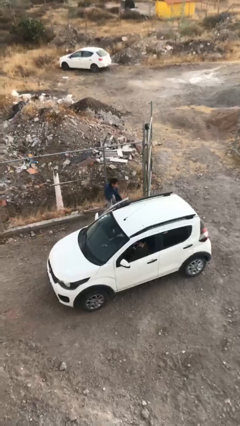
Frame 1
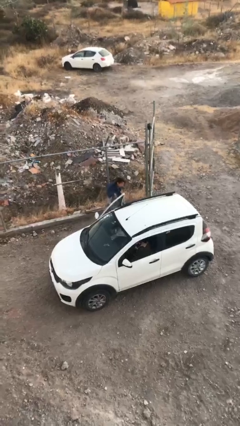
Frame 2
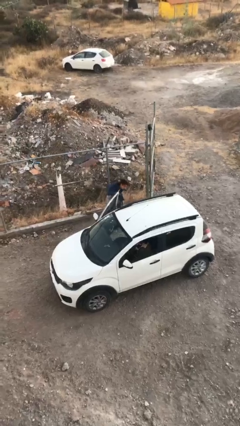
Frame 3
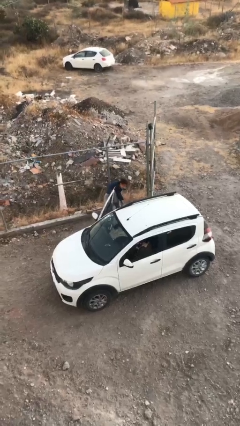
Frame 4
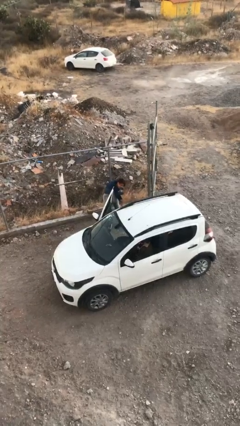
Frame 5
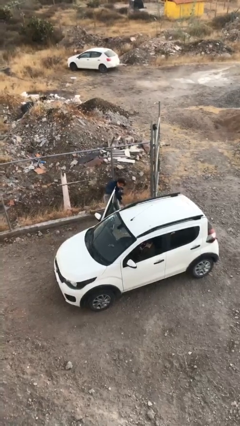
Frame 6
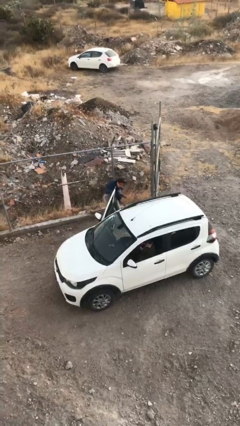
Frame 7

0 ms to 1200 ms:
person opens car door

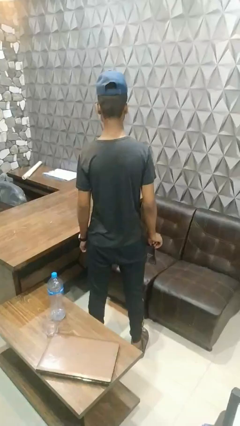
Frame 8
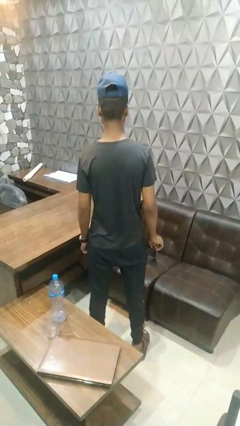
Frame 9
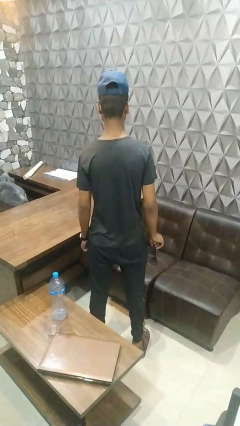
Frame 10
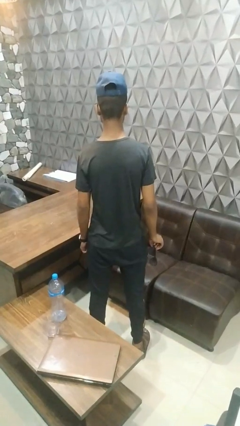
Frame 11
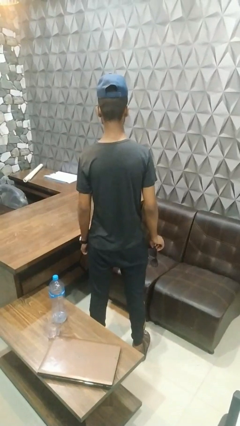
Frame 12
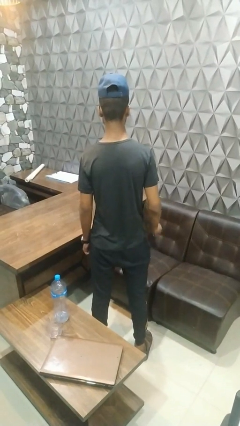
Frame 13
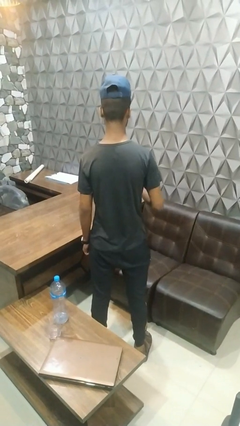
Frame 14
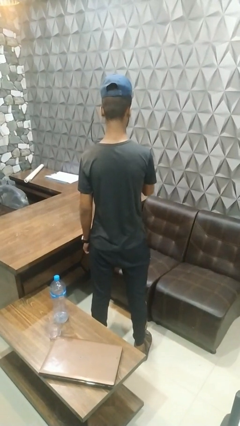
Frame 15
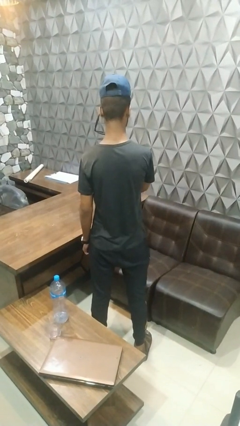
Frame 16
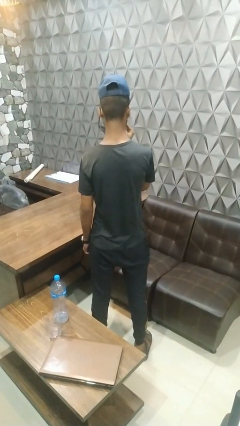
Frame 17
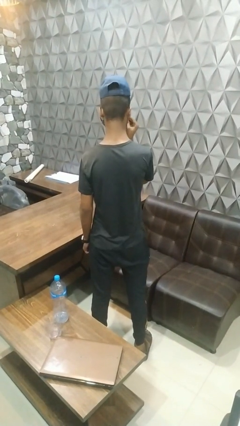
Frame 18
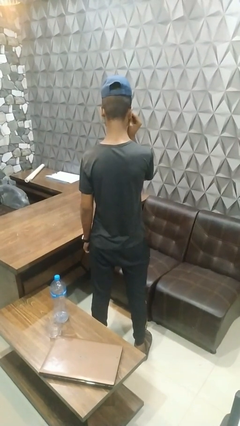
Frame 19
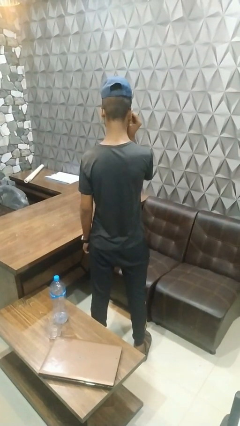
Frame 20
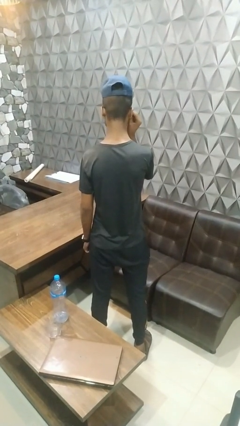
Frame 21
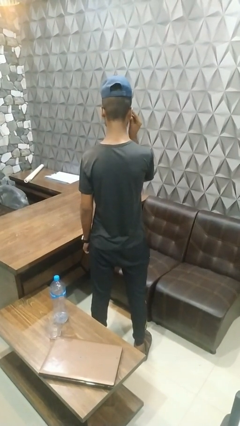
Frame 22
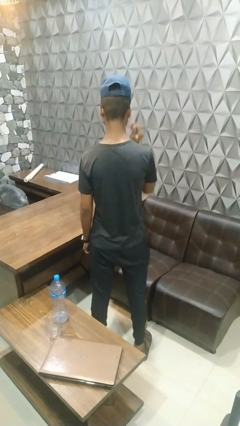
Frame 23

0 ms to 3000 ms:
person puts on sunglasses

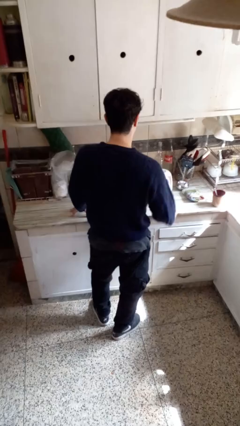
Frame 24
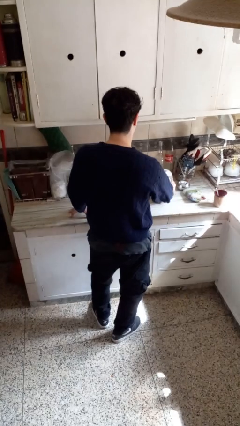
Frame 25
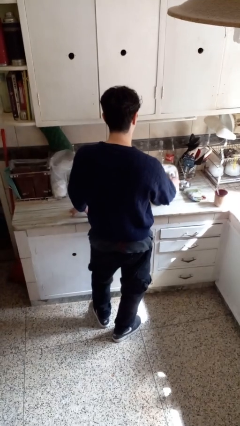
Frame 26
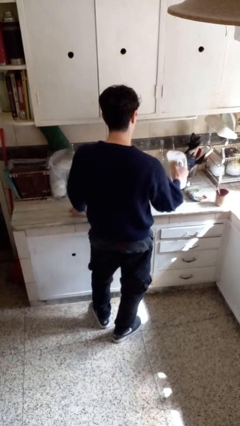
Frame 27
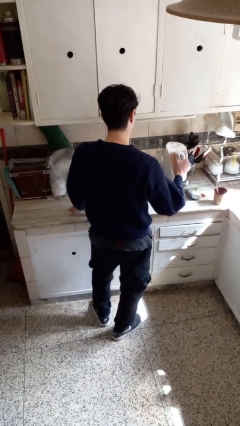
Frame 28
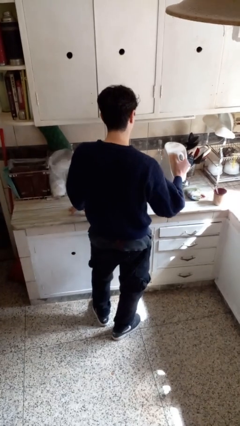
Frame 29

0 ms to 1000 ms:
person picks up object from countertop

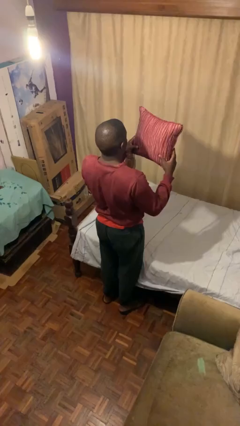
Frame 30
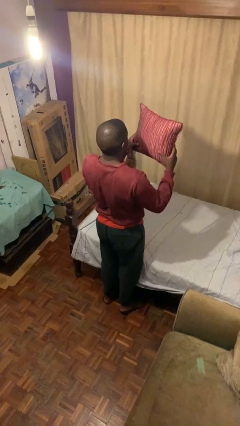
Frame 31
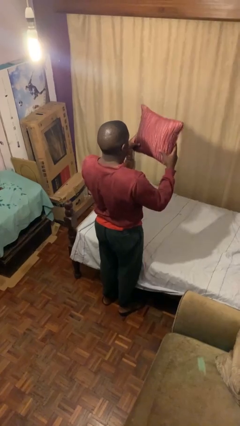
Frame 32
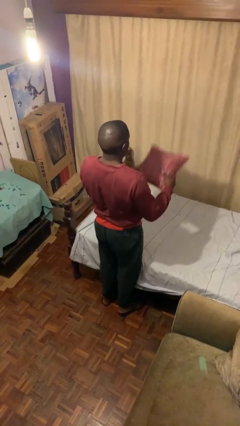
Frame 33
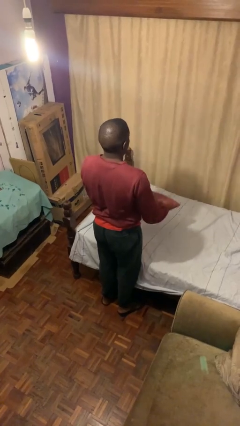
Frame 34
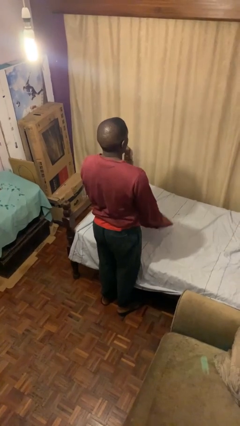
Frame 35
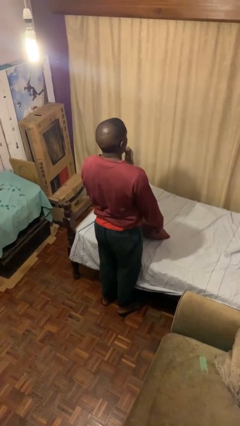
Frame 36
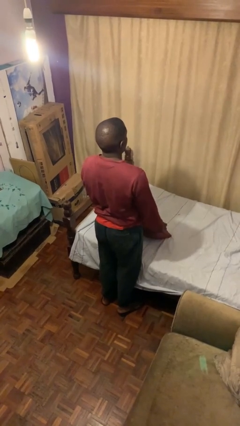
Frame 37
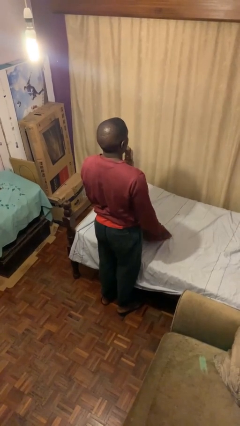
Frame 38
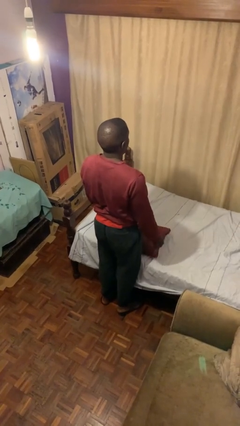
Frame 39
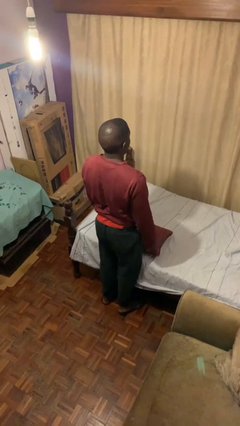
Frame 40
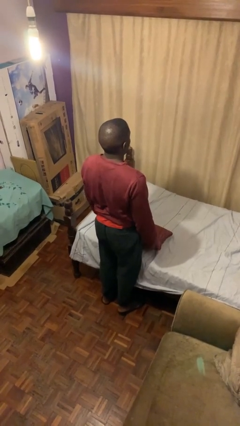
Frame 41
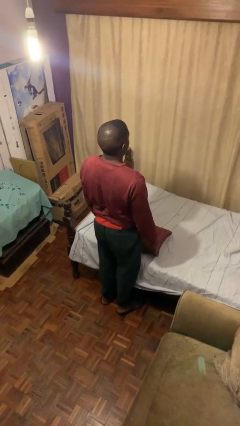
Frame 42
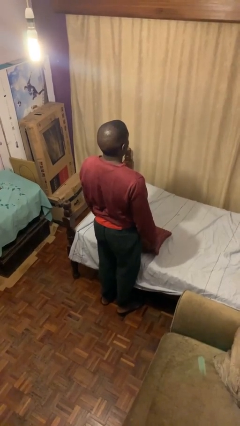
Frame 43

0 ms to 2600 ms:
person puts down object on bed

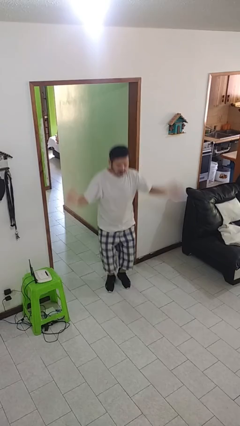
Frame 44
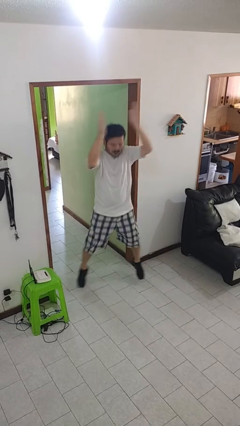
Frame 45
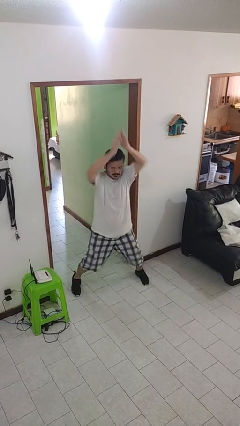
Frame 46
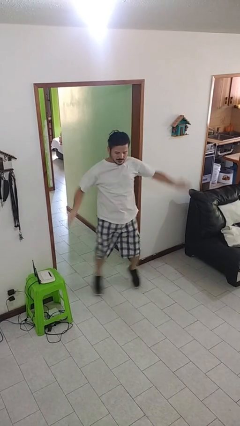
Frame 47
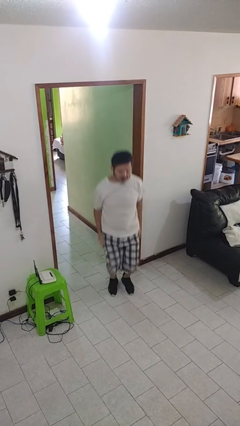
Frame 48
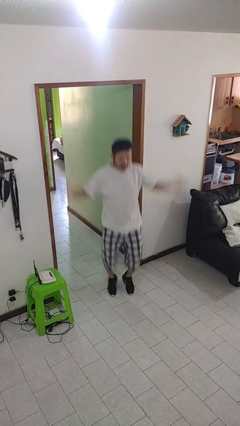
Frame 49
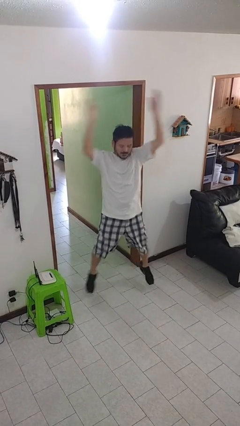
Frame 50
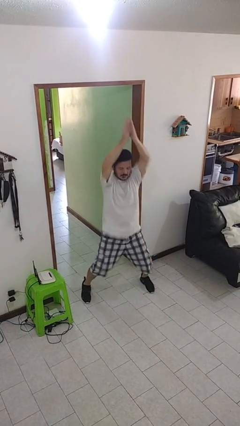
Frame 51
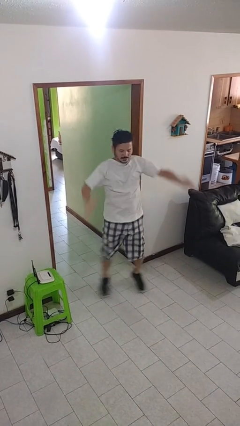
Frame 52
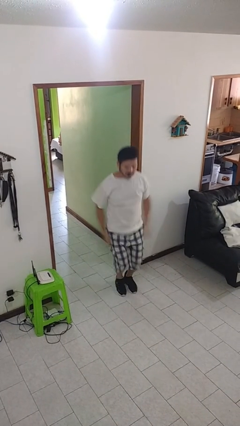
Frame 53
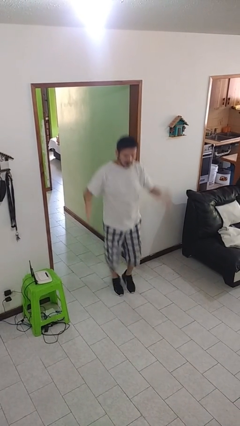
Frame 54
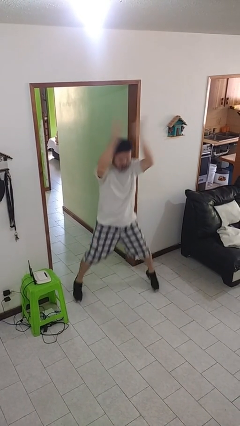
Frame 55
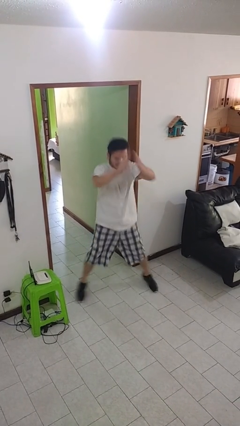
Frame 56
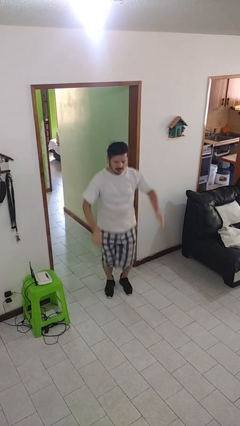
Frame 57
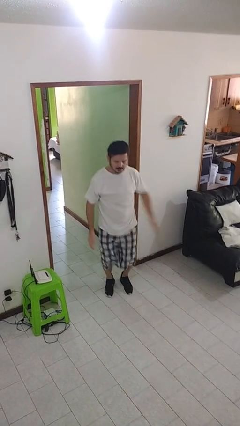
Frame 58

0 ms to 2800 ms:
person exercises with jumping jacks

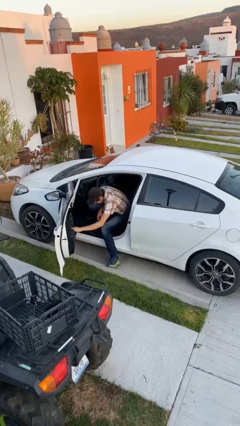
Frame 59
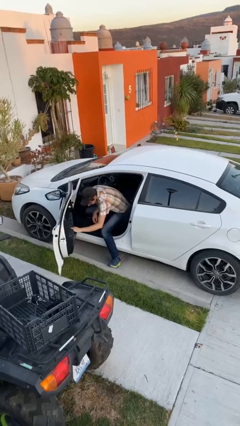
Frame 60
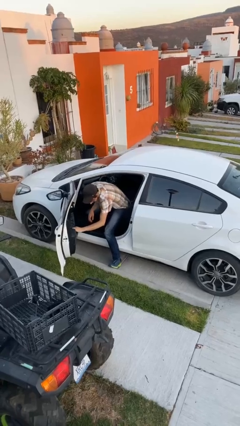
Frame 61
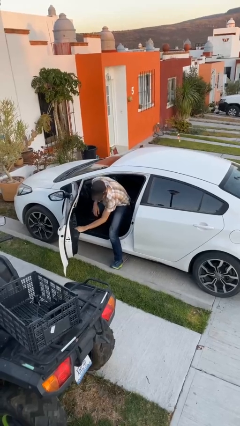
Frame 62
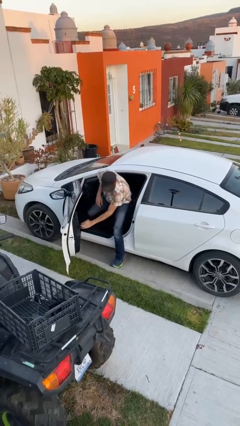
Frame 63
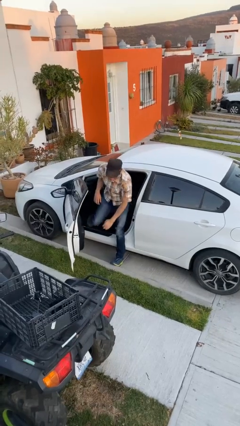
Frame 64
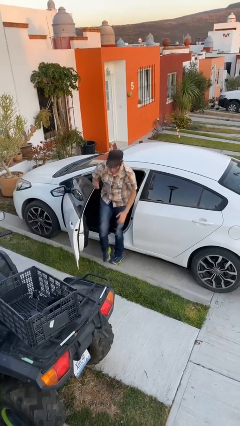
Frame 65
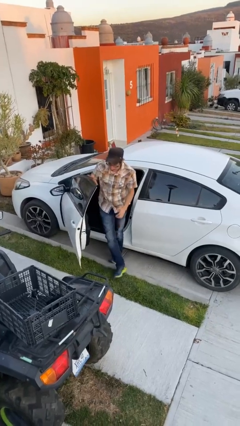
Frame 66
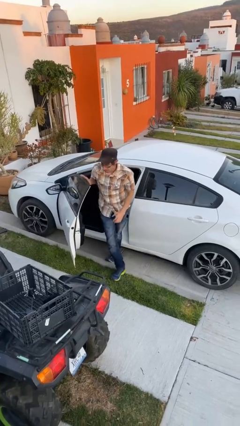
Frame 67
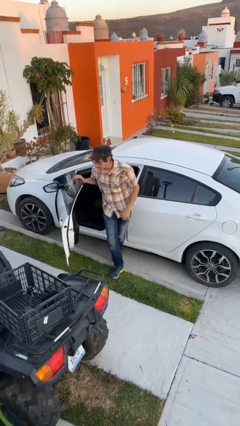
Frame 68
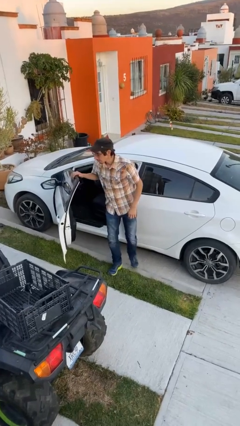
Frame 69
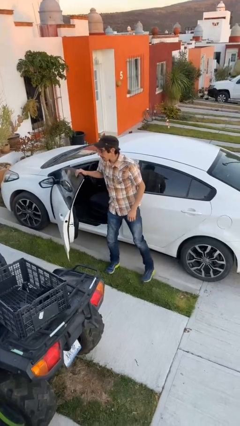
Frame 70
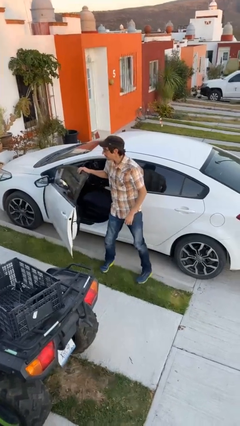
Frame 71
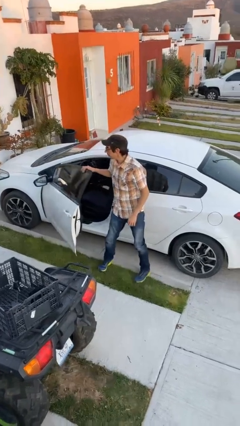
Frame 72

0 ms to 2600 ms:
person exits car

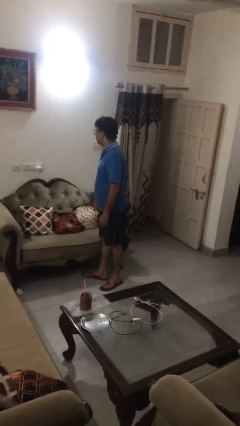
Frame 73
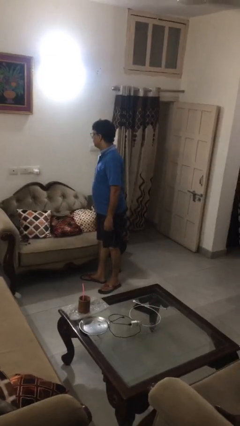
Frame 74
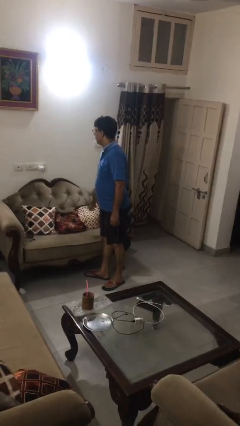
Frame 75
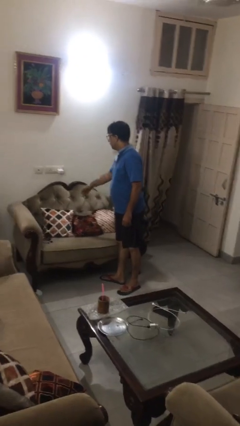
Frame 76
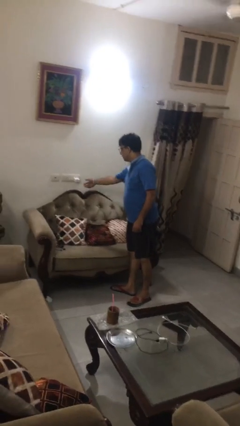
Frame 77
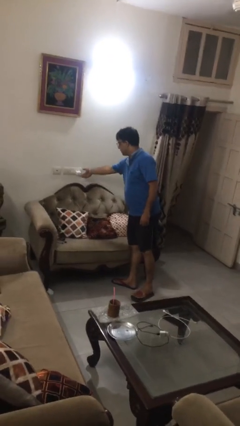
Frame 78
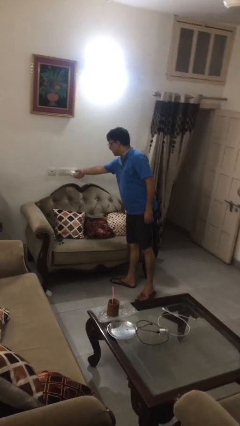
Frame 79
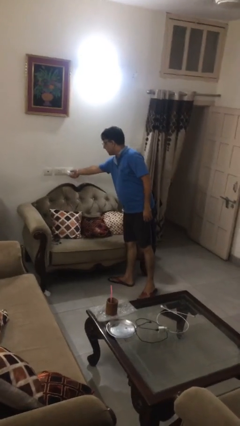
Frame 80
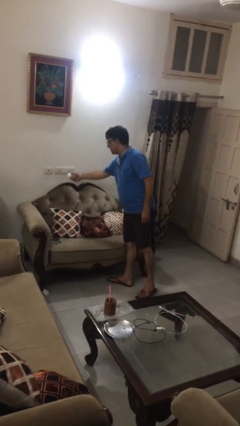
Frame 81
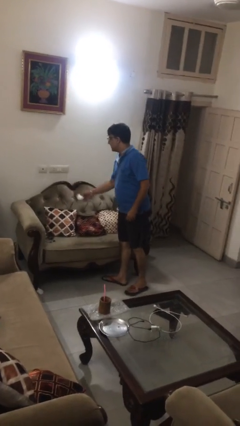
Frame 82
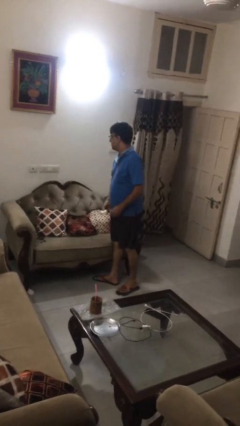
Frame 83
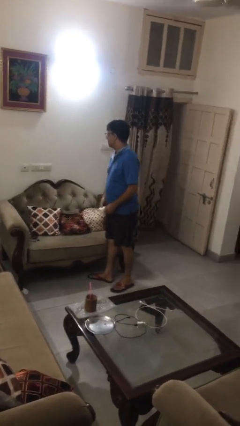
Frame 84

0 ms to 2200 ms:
person unplugs from electrical socket

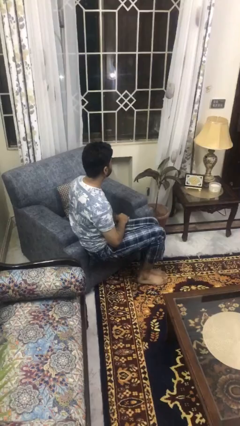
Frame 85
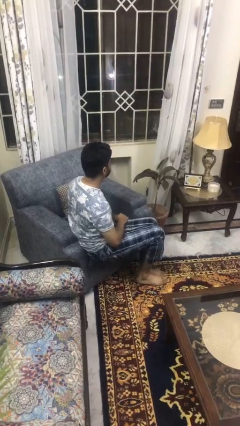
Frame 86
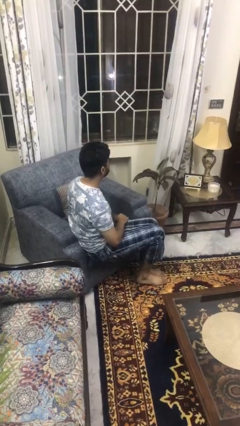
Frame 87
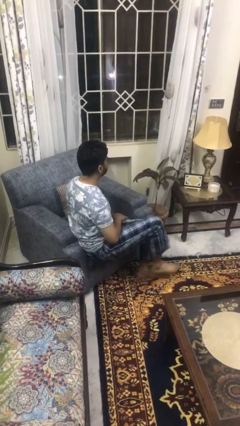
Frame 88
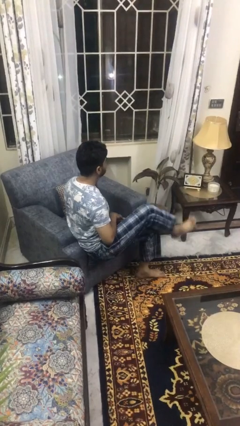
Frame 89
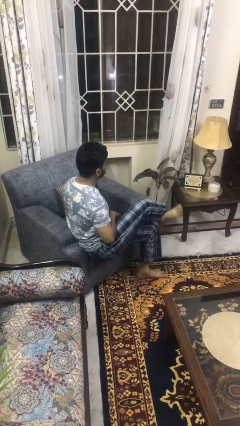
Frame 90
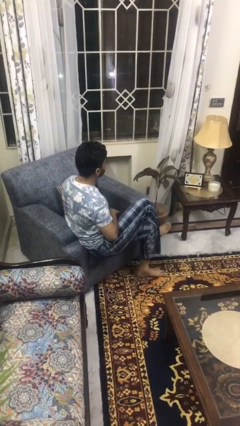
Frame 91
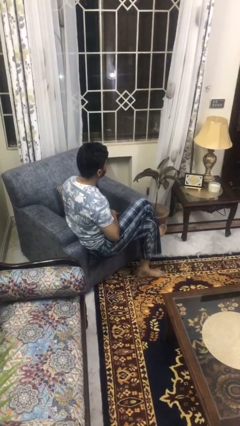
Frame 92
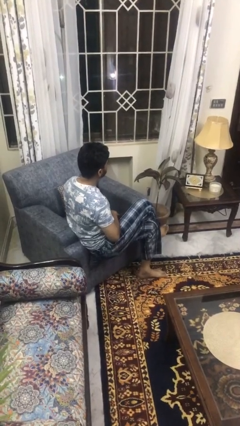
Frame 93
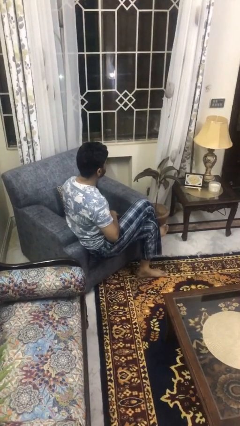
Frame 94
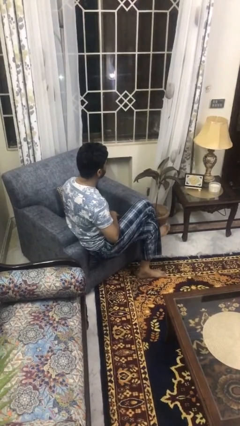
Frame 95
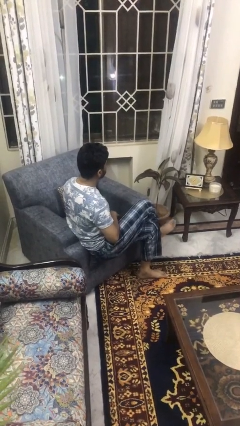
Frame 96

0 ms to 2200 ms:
person crosses legs
